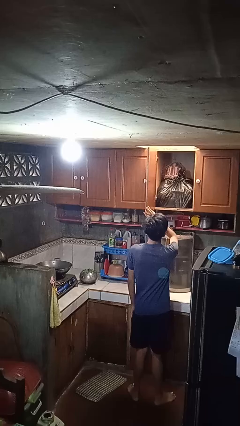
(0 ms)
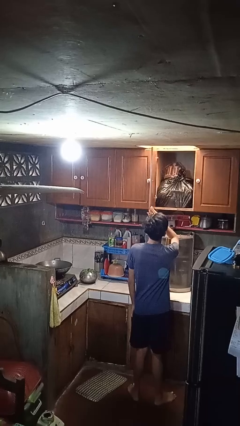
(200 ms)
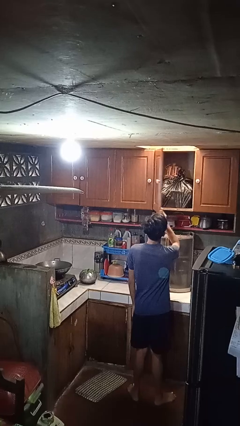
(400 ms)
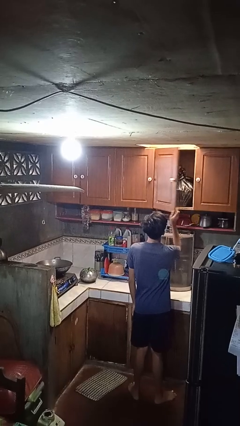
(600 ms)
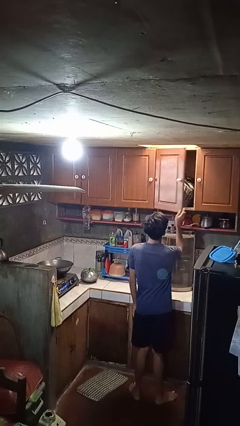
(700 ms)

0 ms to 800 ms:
person closes cabinet

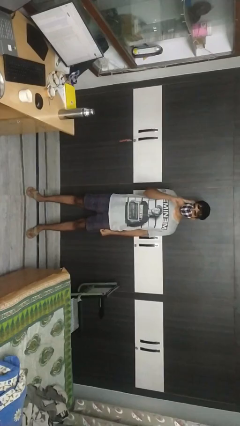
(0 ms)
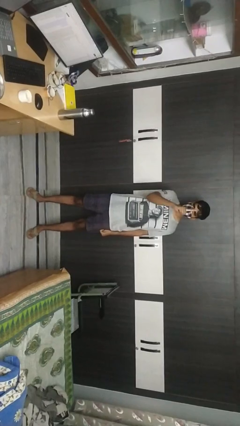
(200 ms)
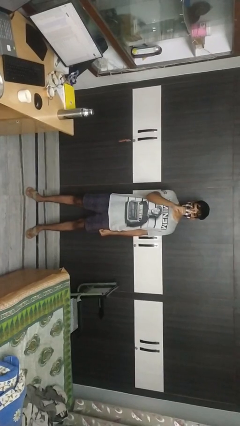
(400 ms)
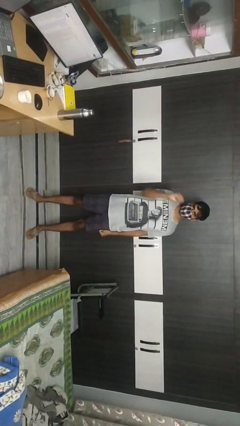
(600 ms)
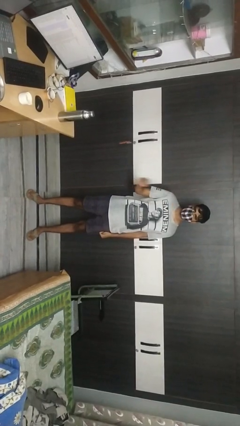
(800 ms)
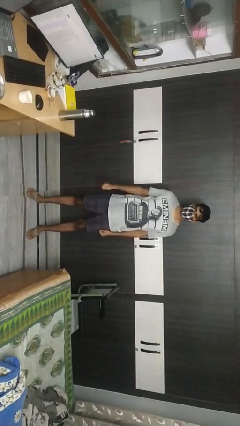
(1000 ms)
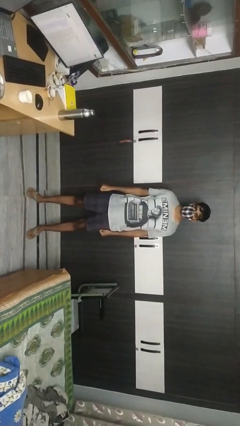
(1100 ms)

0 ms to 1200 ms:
person gestures number one

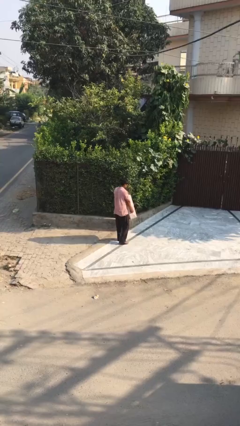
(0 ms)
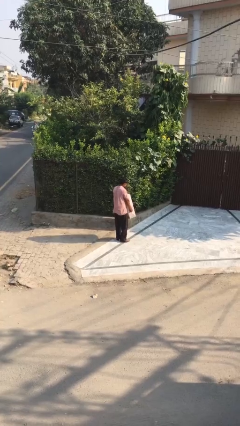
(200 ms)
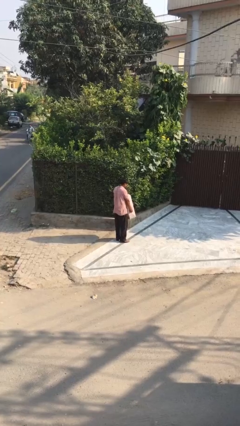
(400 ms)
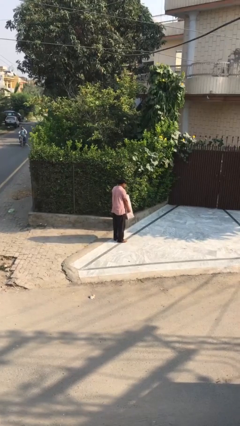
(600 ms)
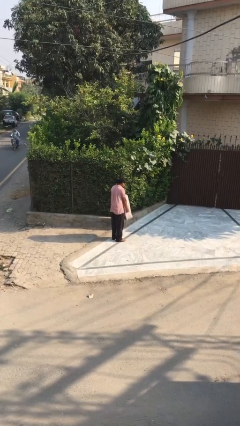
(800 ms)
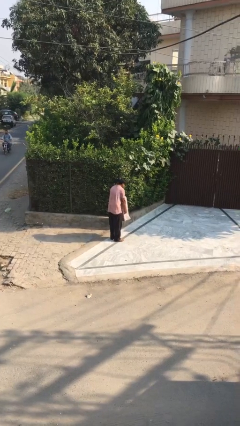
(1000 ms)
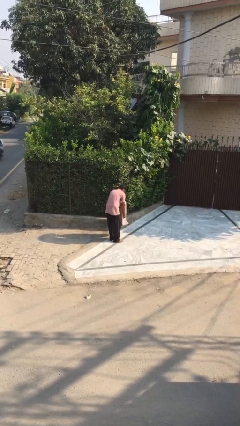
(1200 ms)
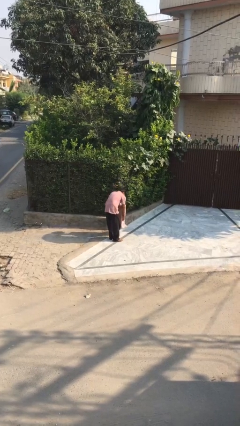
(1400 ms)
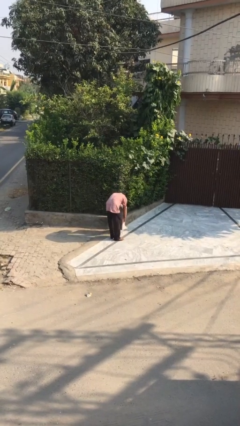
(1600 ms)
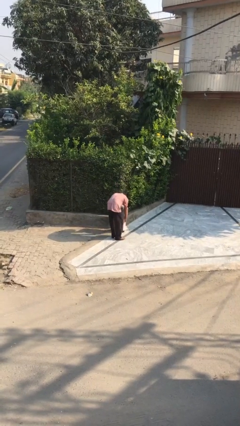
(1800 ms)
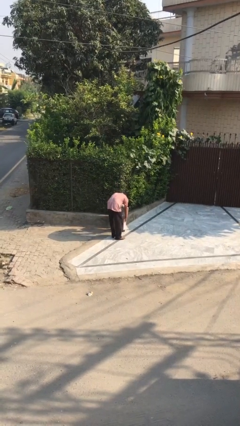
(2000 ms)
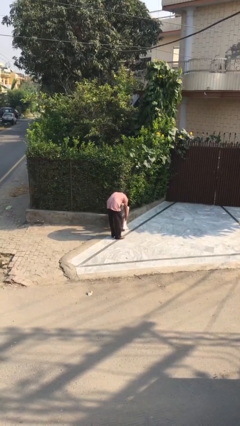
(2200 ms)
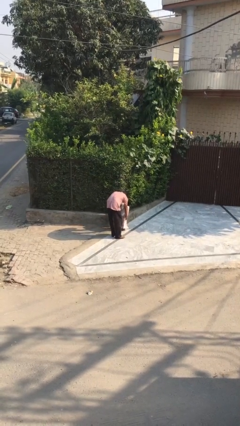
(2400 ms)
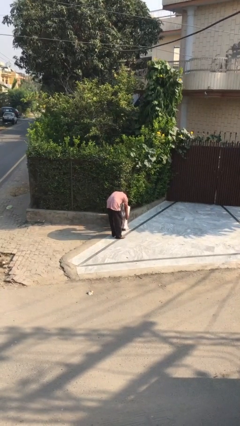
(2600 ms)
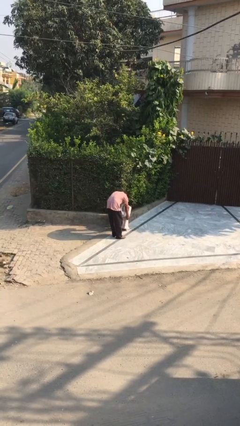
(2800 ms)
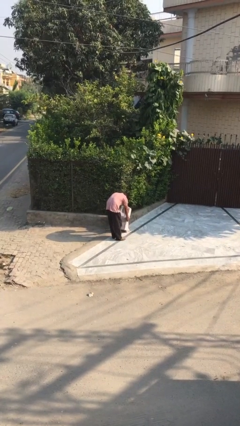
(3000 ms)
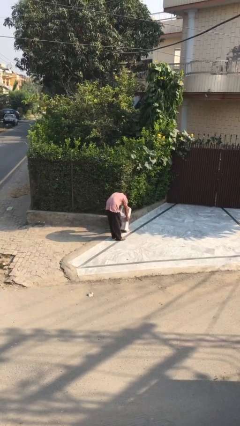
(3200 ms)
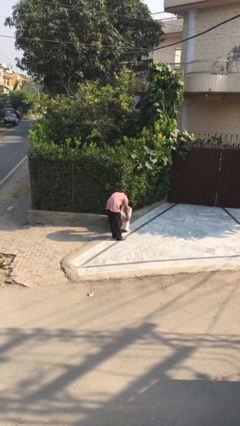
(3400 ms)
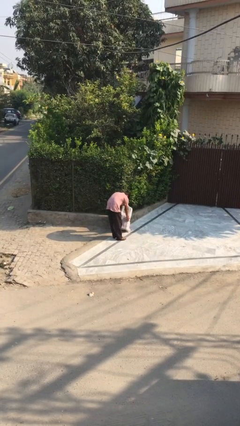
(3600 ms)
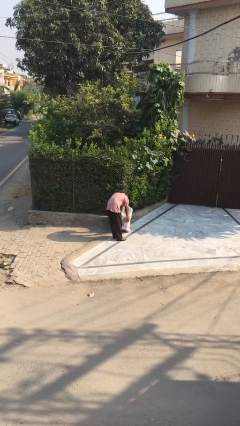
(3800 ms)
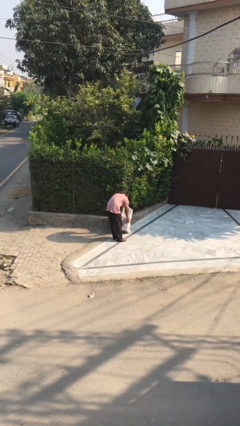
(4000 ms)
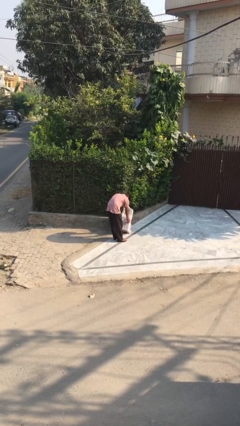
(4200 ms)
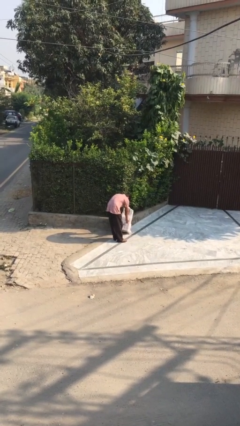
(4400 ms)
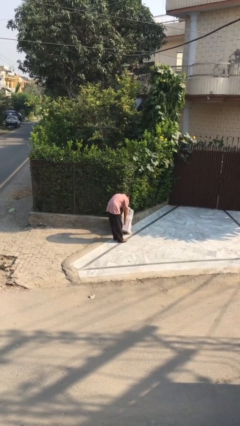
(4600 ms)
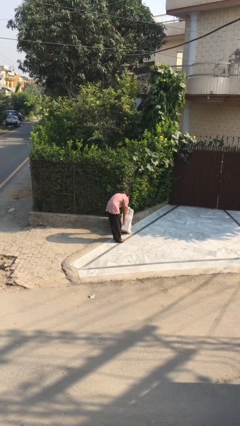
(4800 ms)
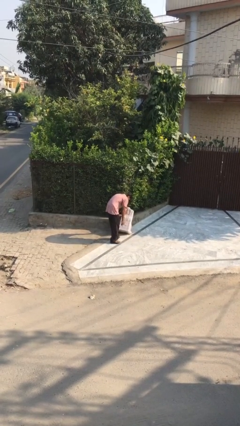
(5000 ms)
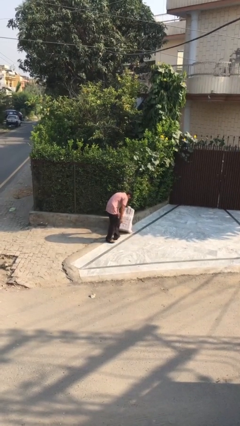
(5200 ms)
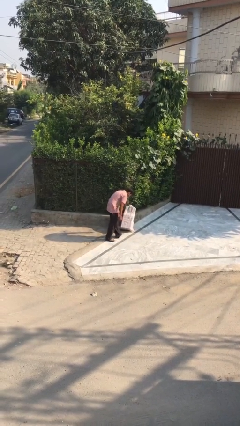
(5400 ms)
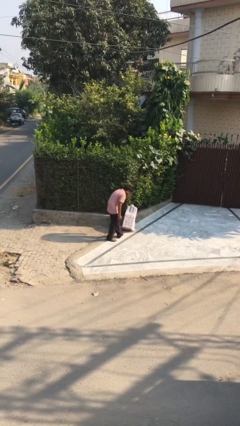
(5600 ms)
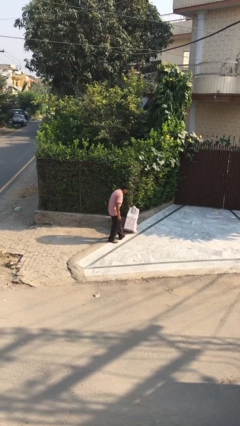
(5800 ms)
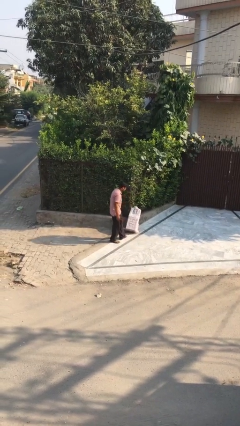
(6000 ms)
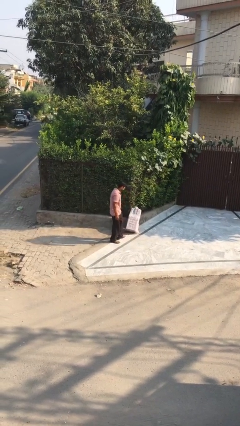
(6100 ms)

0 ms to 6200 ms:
person puts down object on floor

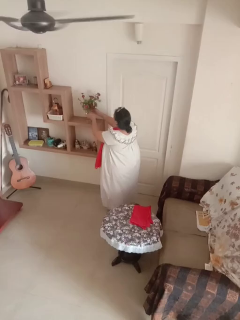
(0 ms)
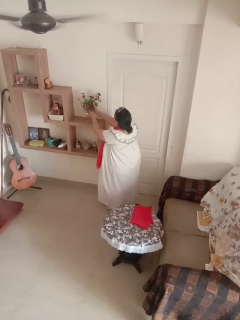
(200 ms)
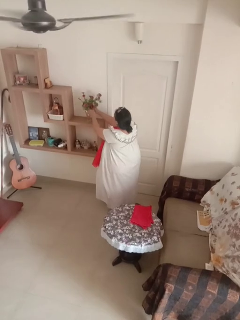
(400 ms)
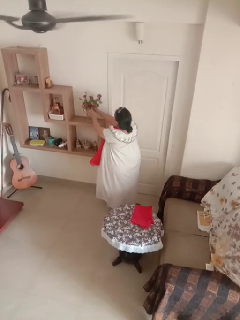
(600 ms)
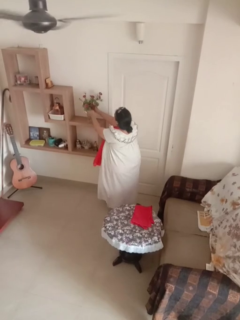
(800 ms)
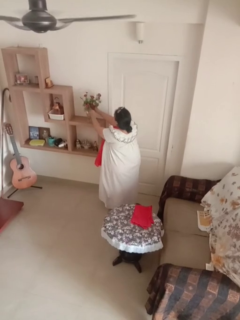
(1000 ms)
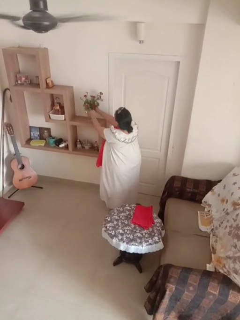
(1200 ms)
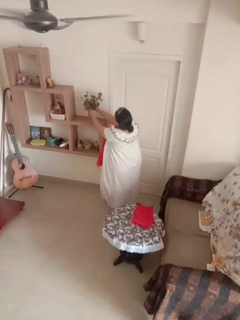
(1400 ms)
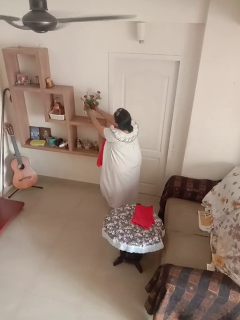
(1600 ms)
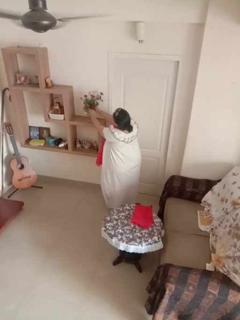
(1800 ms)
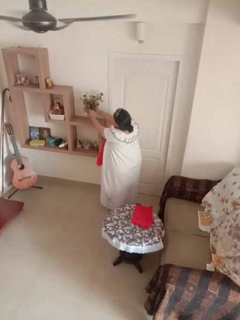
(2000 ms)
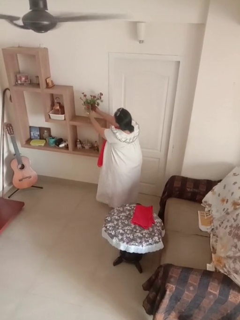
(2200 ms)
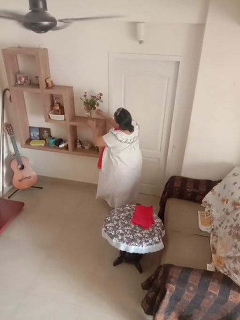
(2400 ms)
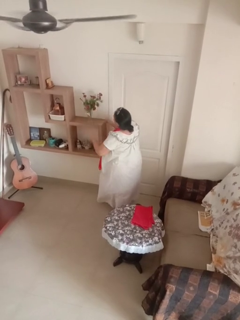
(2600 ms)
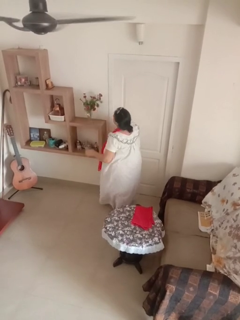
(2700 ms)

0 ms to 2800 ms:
person arranges flowers in vase

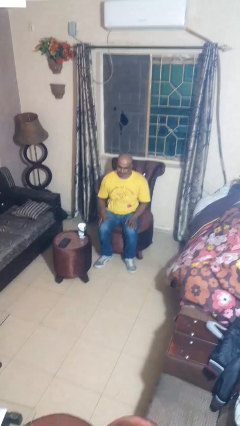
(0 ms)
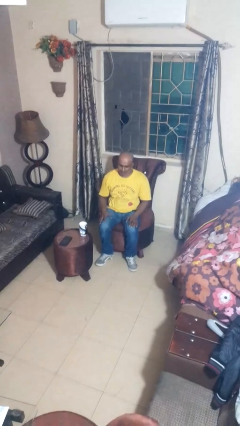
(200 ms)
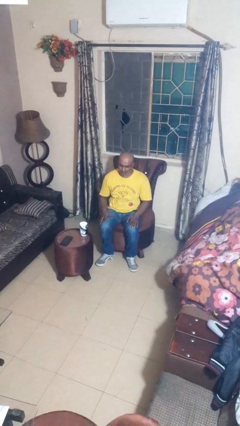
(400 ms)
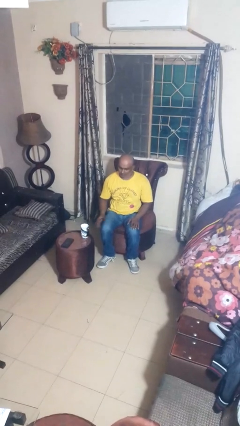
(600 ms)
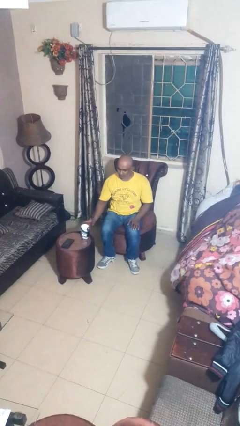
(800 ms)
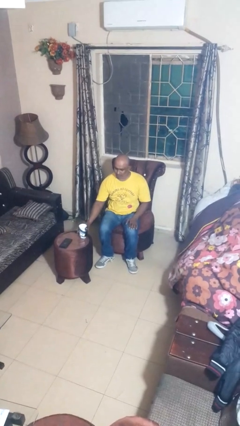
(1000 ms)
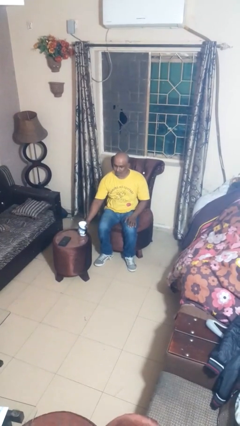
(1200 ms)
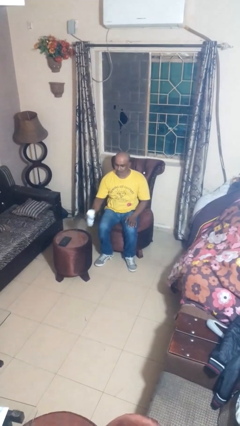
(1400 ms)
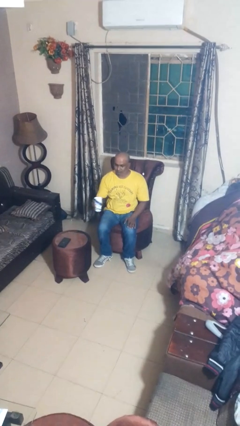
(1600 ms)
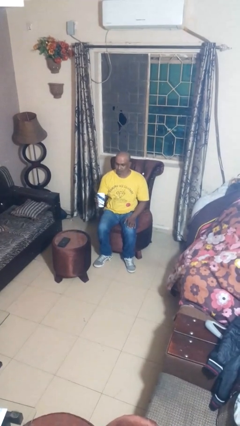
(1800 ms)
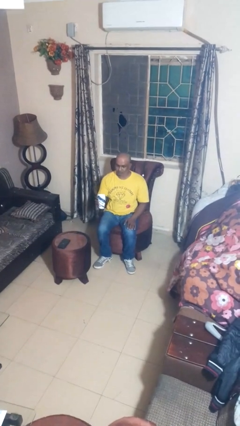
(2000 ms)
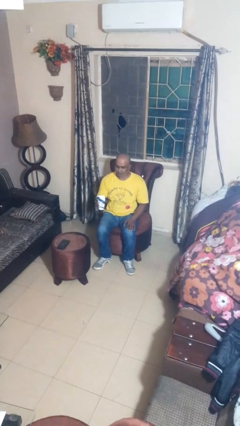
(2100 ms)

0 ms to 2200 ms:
person picks up object from table

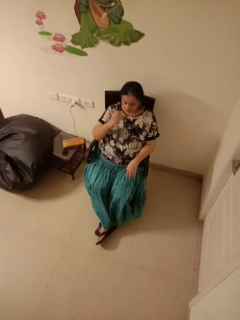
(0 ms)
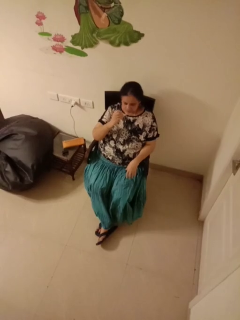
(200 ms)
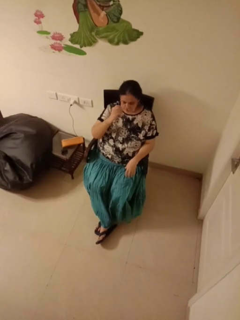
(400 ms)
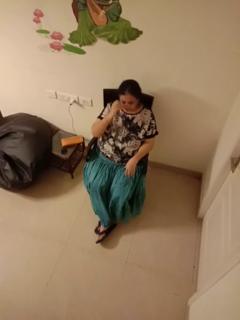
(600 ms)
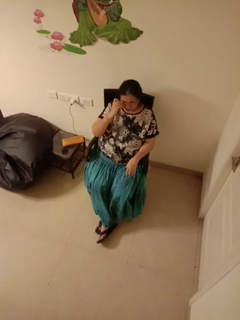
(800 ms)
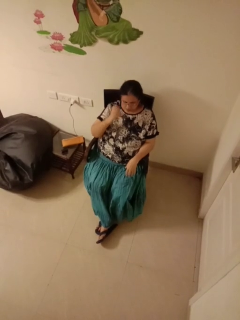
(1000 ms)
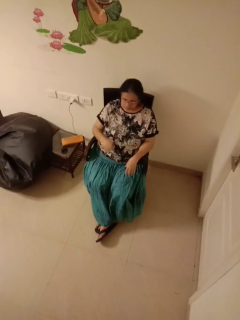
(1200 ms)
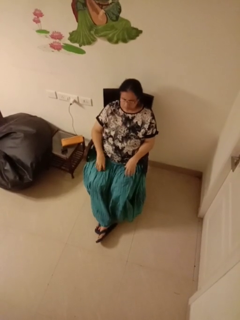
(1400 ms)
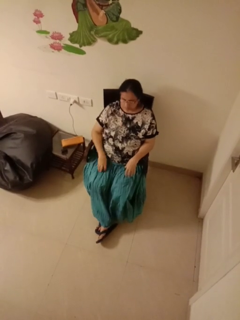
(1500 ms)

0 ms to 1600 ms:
person puts on glasses

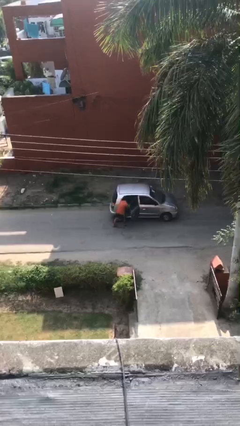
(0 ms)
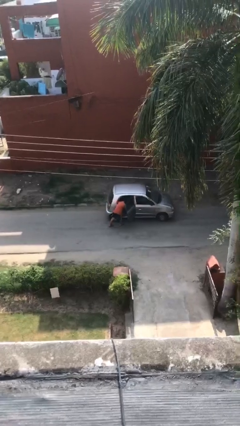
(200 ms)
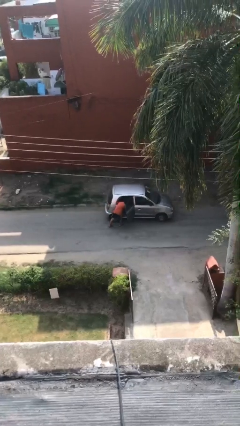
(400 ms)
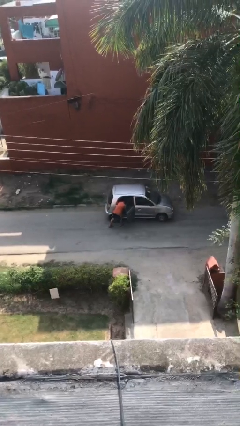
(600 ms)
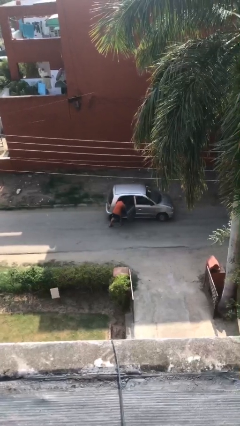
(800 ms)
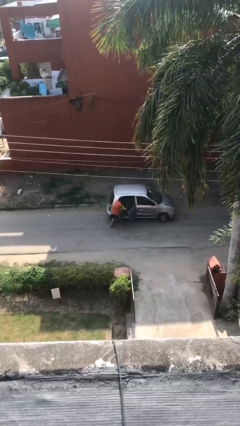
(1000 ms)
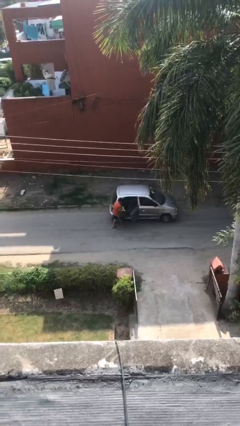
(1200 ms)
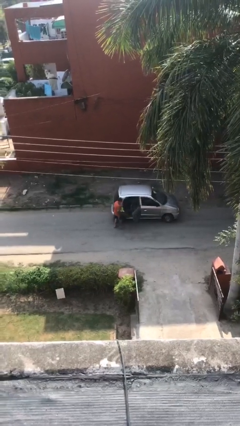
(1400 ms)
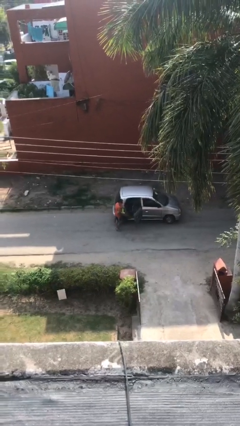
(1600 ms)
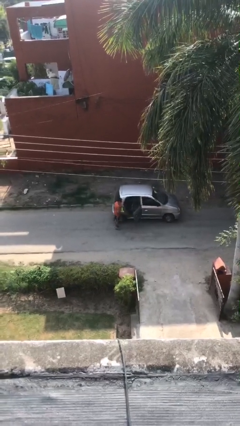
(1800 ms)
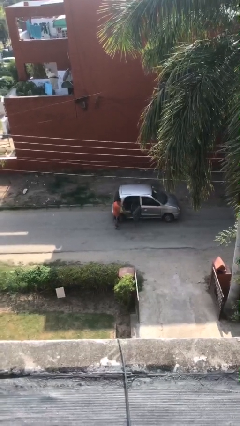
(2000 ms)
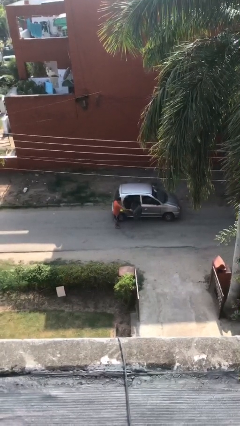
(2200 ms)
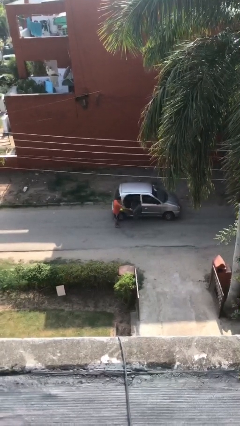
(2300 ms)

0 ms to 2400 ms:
person unloads car

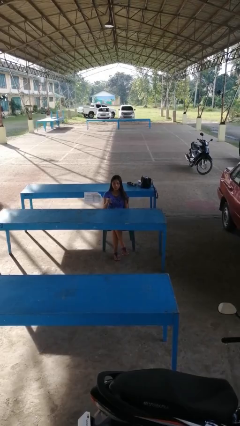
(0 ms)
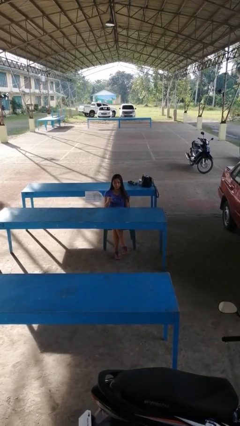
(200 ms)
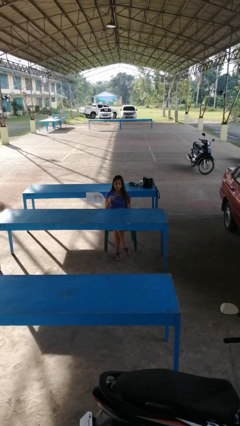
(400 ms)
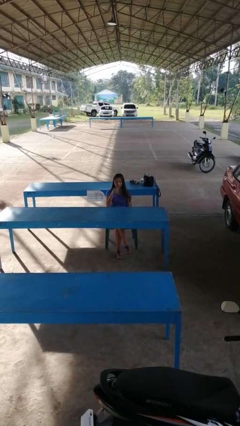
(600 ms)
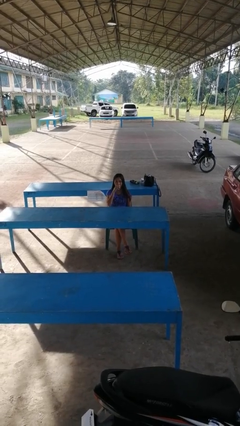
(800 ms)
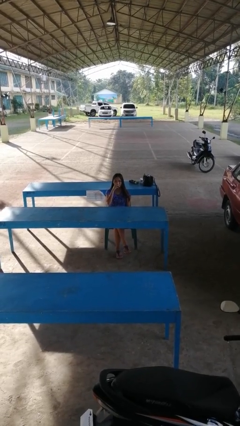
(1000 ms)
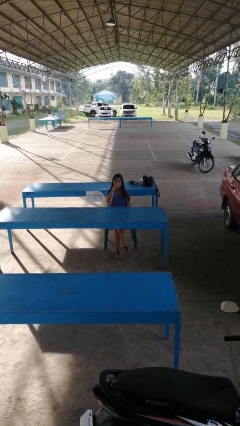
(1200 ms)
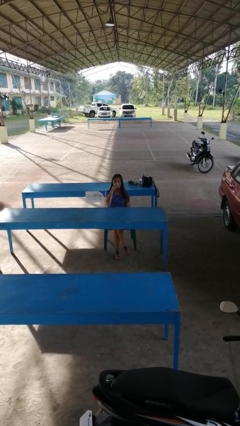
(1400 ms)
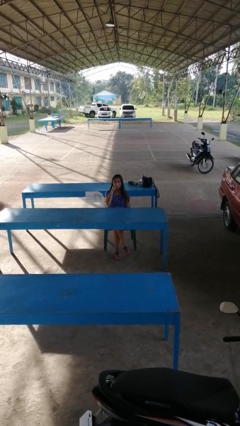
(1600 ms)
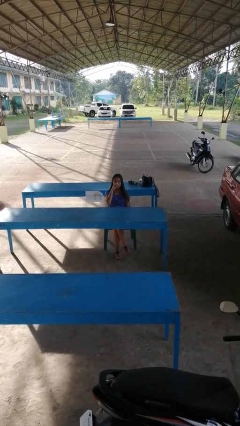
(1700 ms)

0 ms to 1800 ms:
person drinks from shotglass
